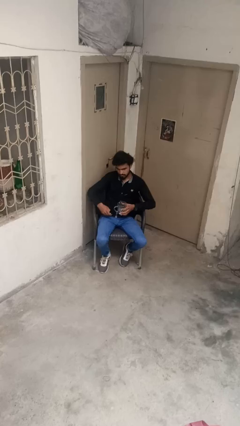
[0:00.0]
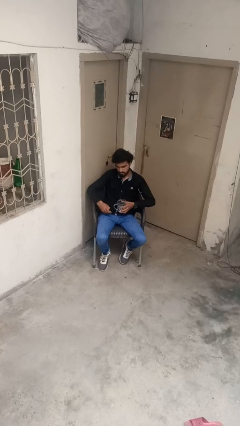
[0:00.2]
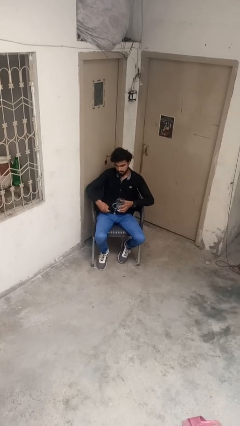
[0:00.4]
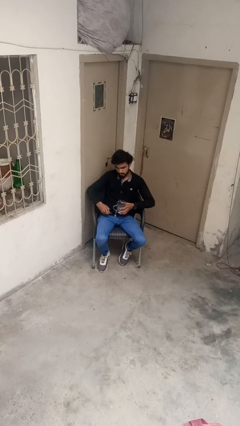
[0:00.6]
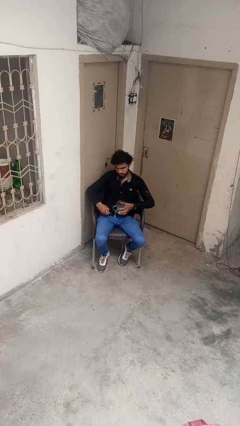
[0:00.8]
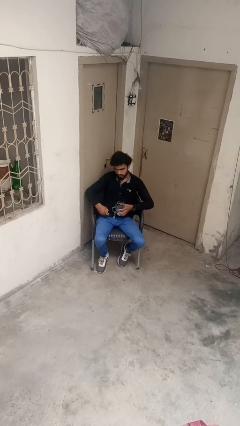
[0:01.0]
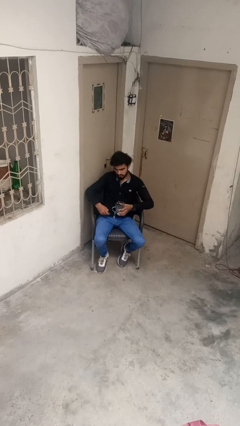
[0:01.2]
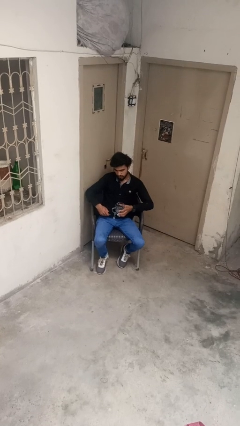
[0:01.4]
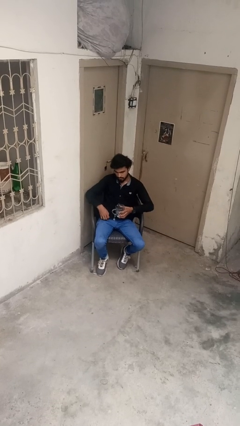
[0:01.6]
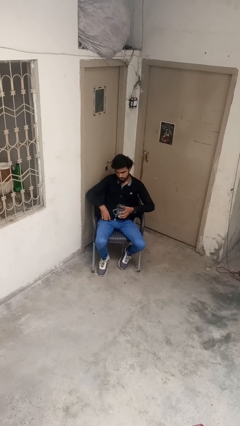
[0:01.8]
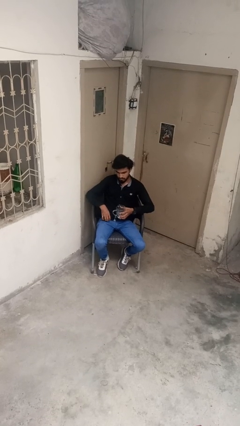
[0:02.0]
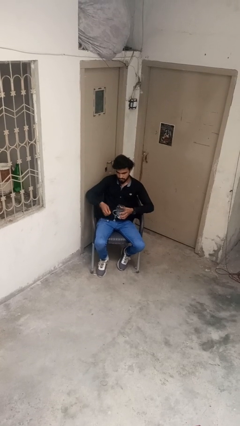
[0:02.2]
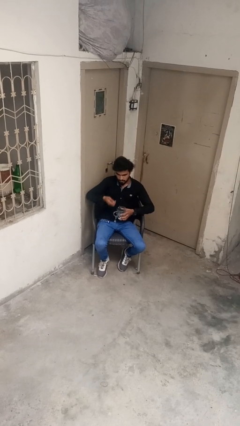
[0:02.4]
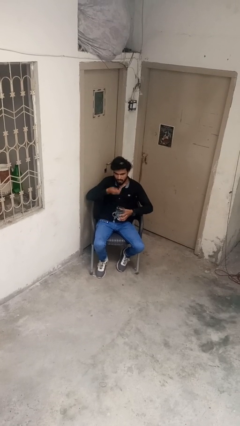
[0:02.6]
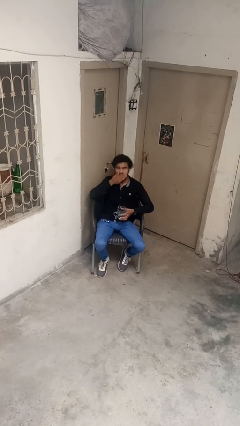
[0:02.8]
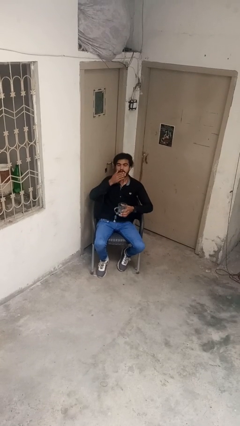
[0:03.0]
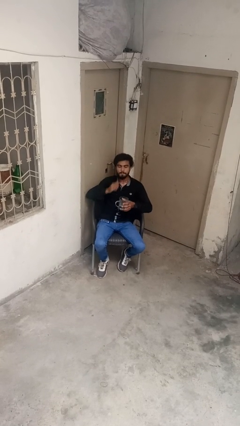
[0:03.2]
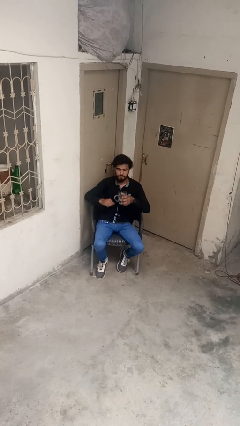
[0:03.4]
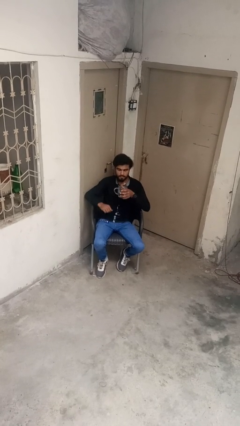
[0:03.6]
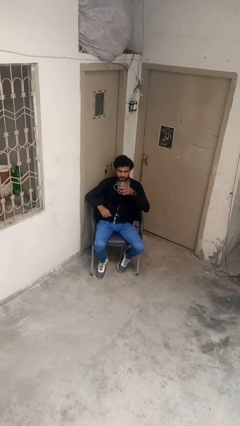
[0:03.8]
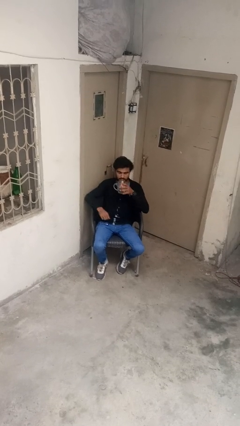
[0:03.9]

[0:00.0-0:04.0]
person takes medicine pills

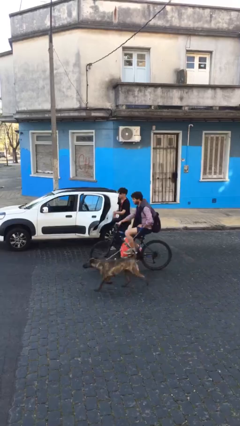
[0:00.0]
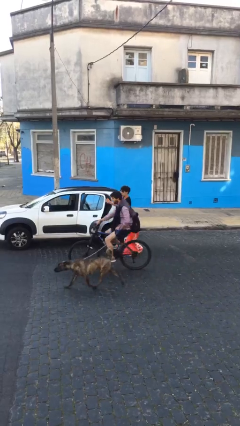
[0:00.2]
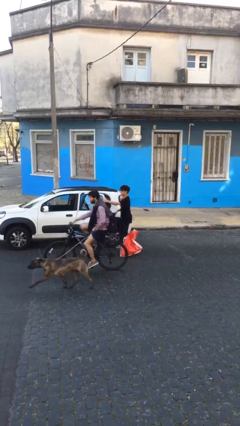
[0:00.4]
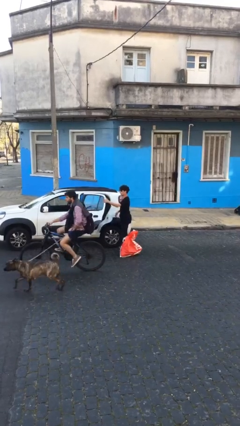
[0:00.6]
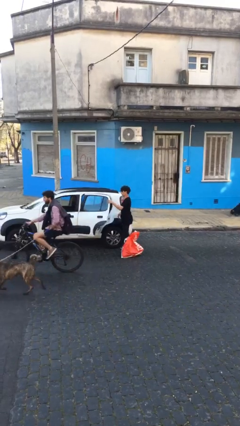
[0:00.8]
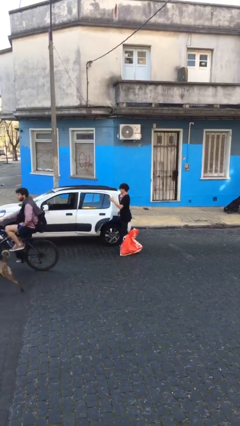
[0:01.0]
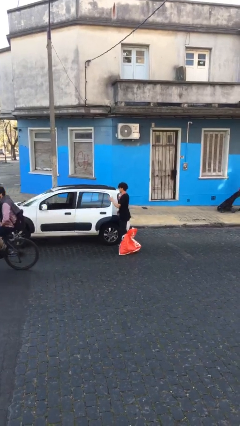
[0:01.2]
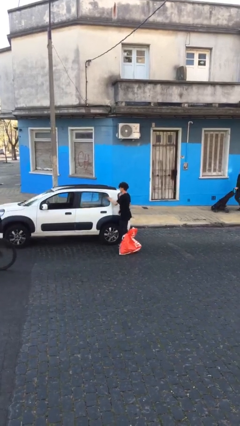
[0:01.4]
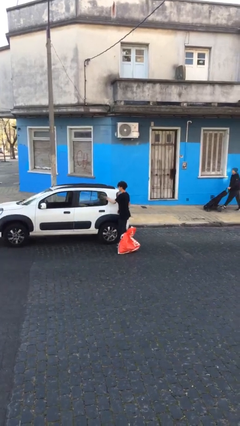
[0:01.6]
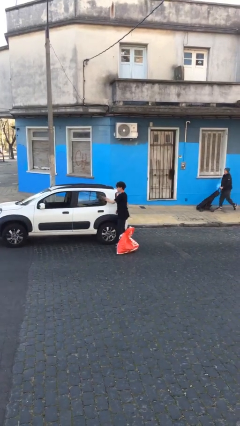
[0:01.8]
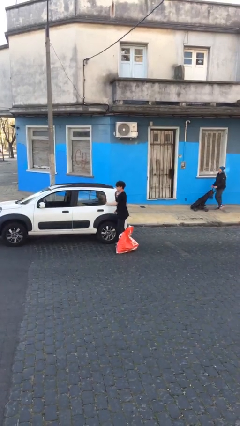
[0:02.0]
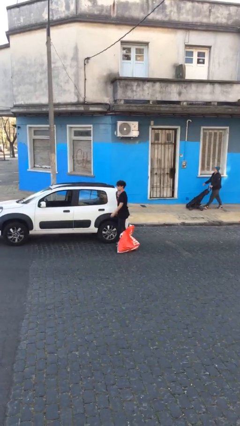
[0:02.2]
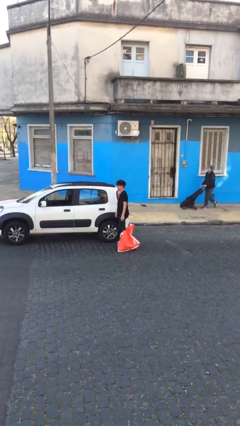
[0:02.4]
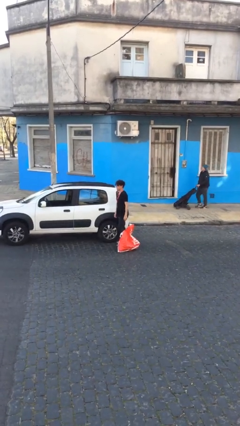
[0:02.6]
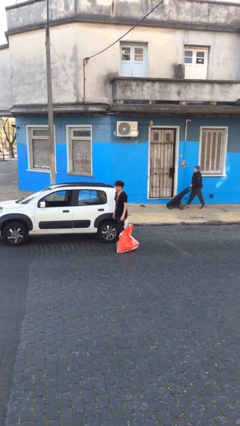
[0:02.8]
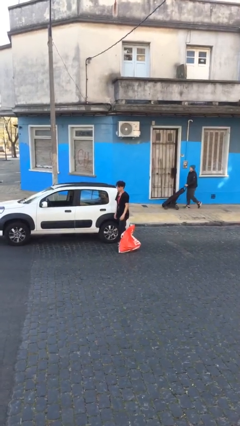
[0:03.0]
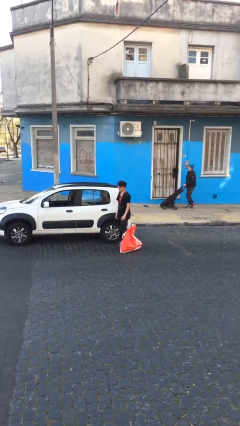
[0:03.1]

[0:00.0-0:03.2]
person closes car door

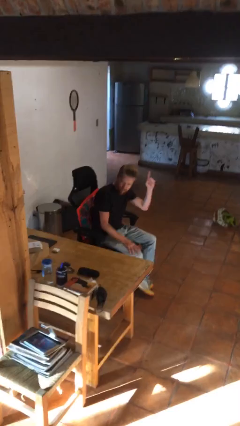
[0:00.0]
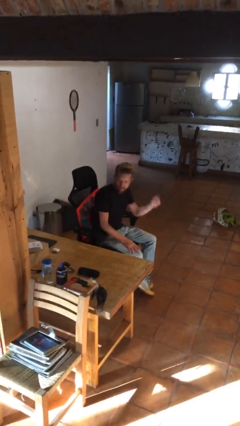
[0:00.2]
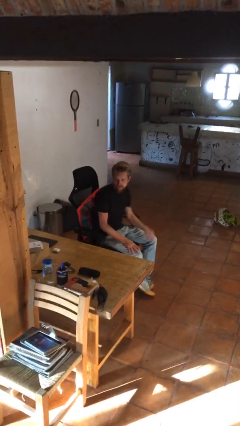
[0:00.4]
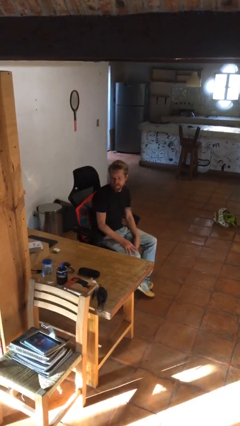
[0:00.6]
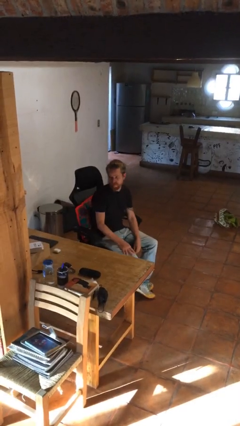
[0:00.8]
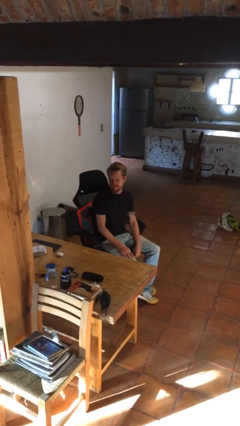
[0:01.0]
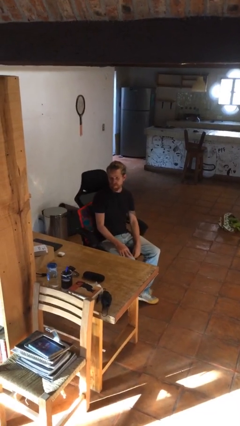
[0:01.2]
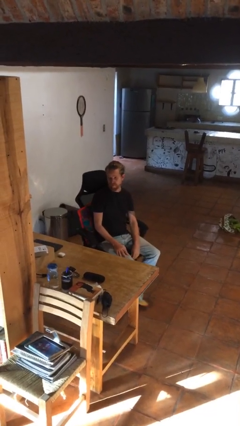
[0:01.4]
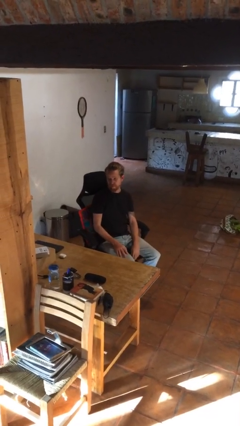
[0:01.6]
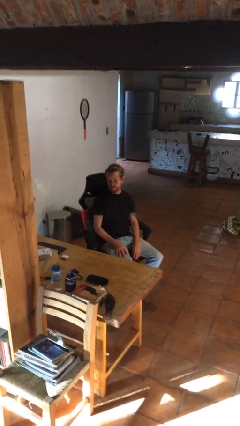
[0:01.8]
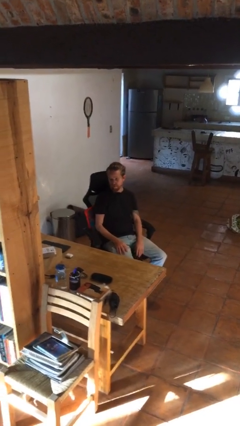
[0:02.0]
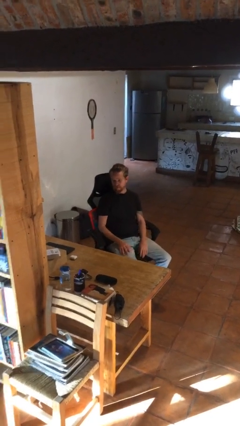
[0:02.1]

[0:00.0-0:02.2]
person gestures lower hand

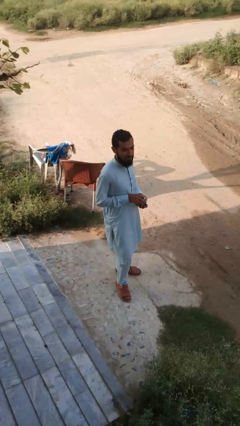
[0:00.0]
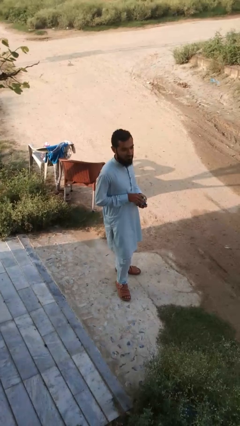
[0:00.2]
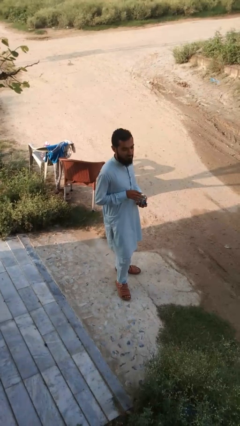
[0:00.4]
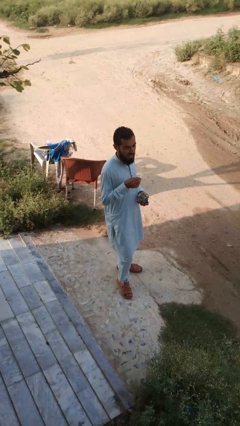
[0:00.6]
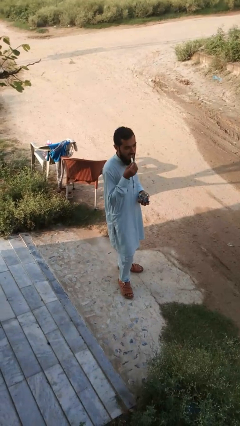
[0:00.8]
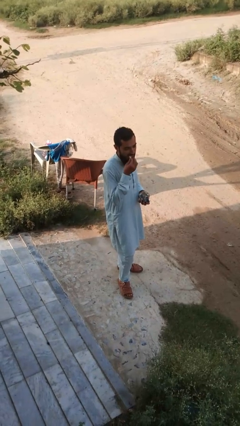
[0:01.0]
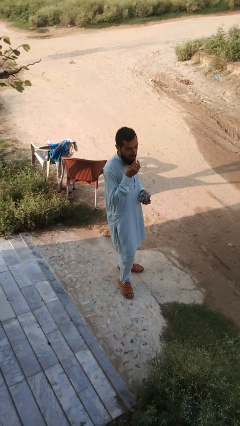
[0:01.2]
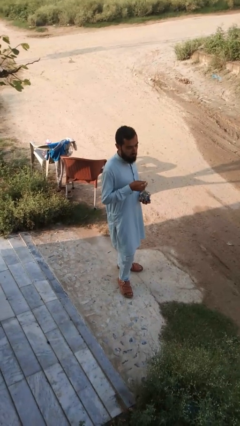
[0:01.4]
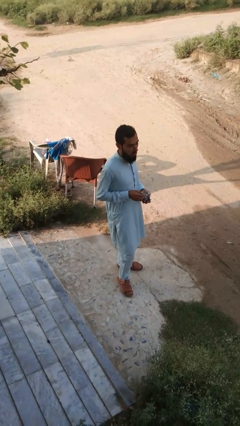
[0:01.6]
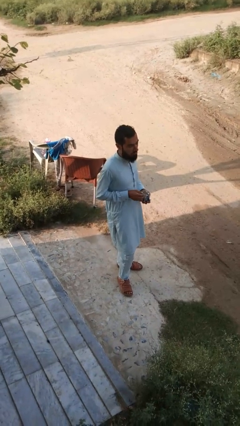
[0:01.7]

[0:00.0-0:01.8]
person eats snack from bag

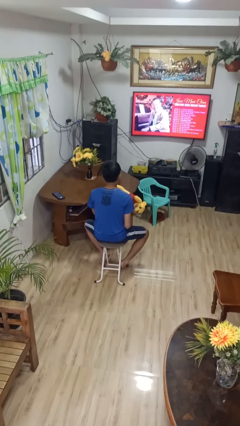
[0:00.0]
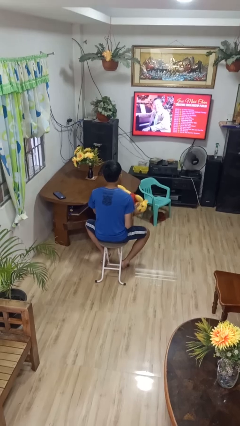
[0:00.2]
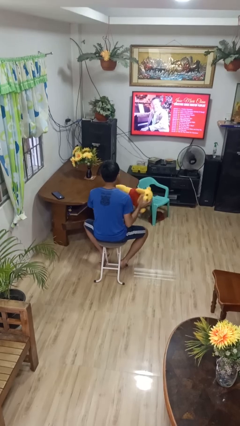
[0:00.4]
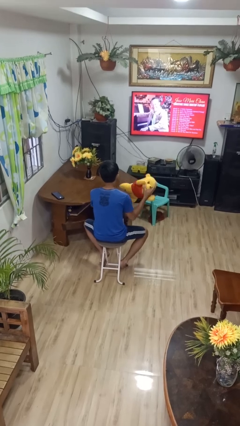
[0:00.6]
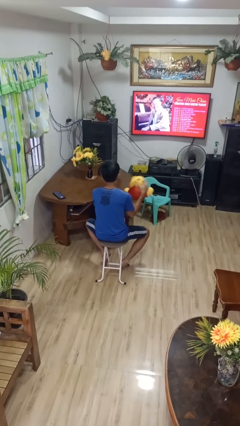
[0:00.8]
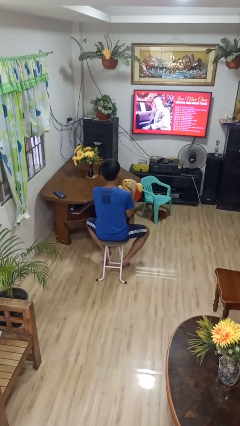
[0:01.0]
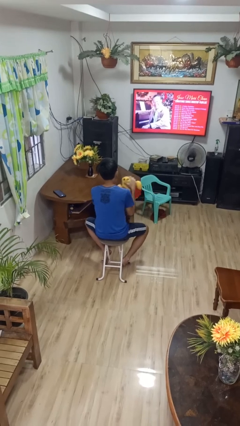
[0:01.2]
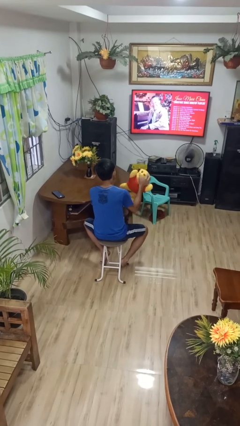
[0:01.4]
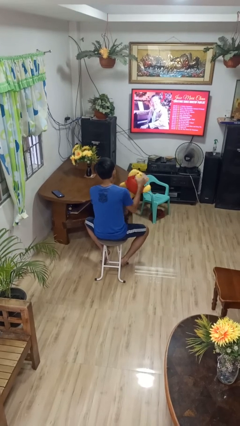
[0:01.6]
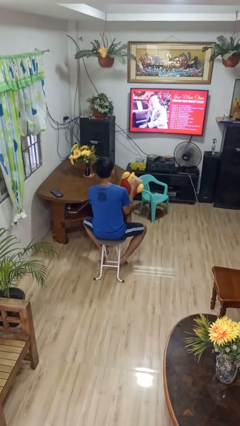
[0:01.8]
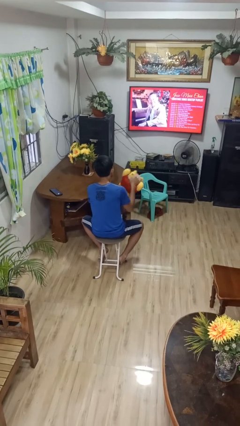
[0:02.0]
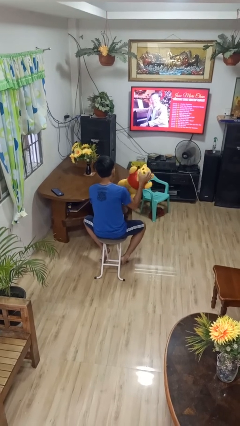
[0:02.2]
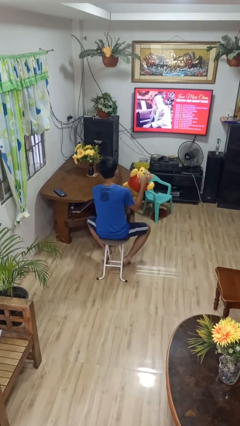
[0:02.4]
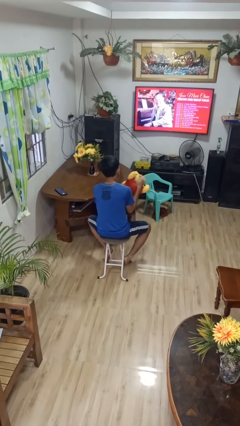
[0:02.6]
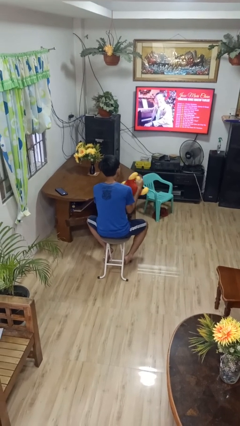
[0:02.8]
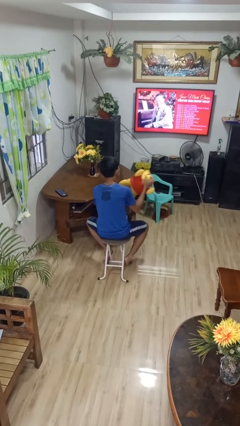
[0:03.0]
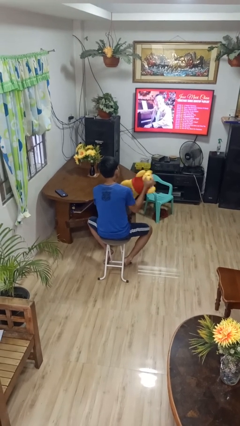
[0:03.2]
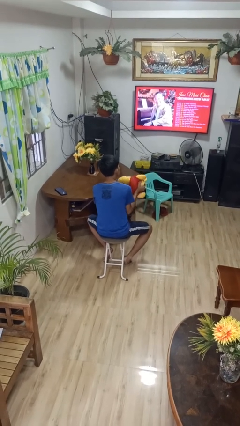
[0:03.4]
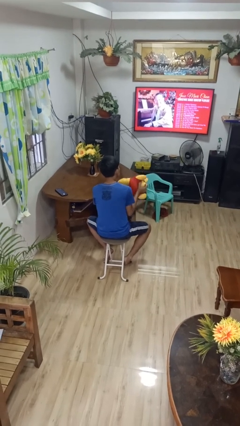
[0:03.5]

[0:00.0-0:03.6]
person squeezes object

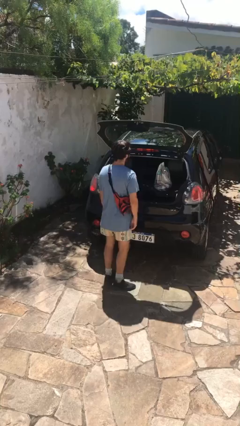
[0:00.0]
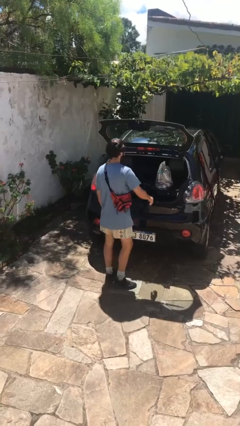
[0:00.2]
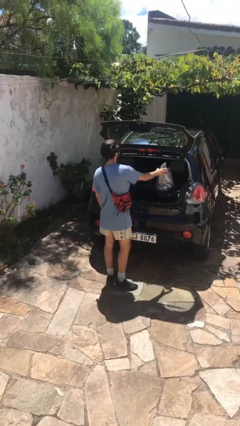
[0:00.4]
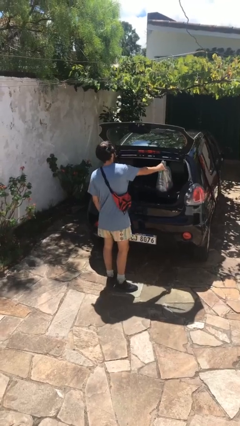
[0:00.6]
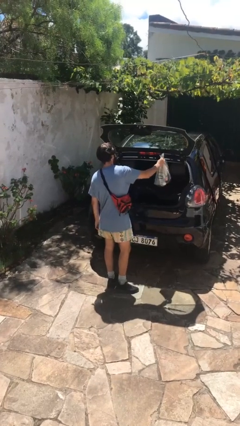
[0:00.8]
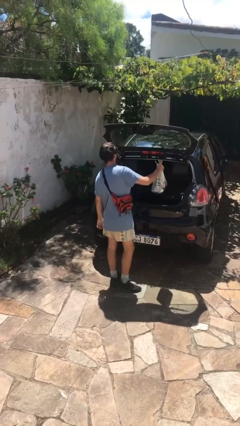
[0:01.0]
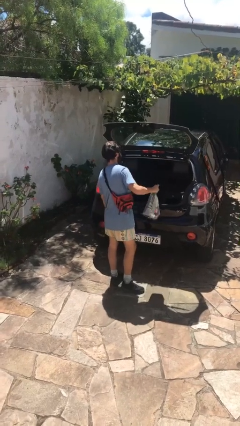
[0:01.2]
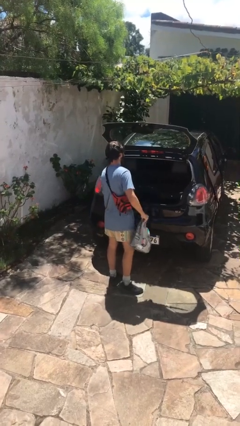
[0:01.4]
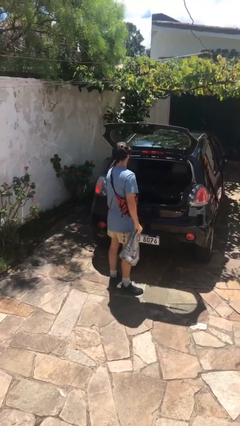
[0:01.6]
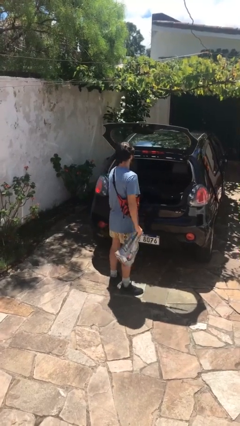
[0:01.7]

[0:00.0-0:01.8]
person unloads car

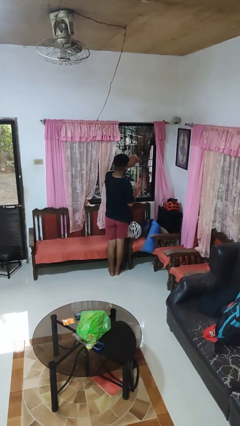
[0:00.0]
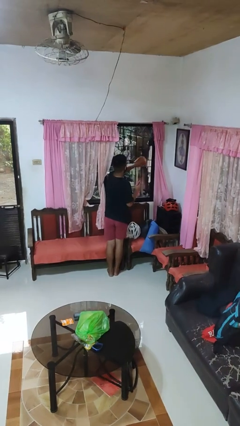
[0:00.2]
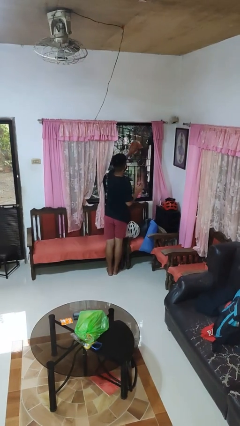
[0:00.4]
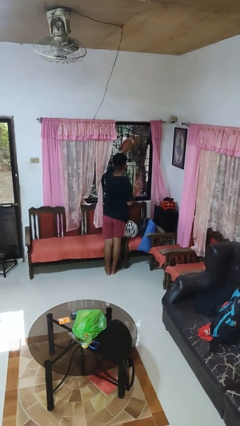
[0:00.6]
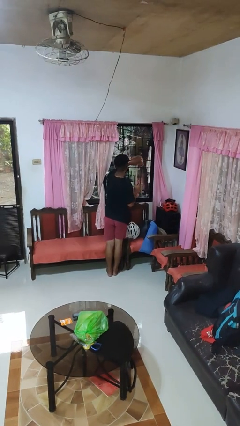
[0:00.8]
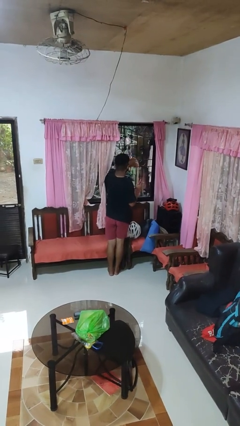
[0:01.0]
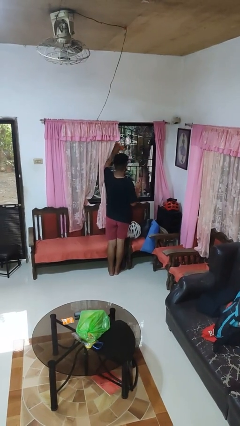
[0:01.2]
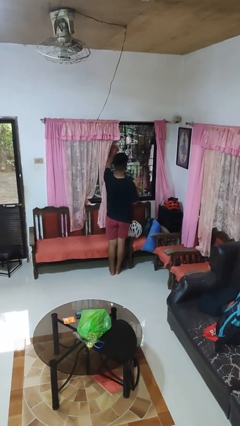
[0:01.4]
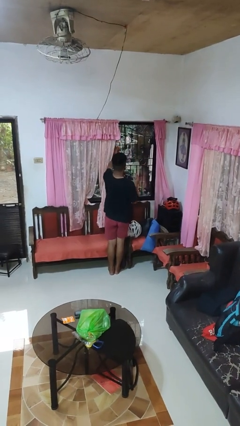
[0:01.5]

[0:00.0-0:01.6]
person washes window
